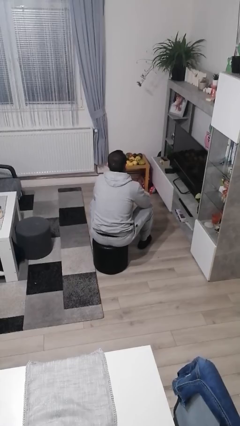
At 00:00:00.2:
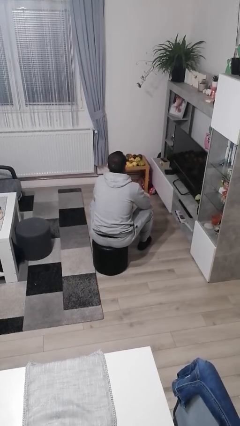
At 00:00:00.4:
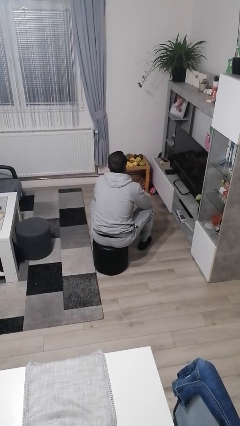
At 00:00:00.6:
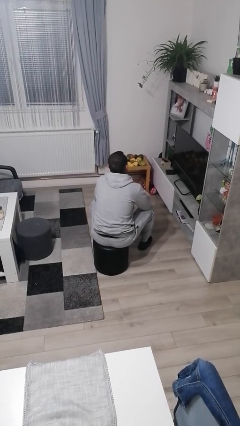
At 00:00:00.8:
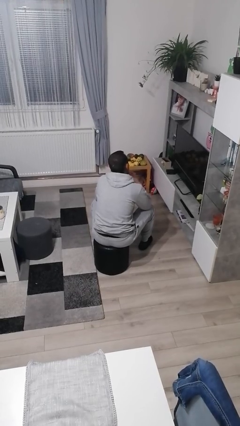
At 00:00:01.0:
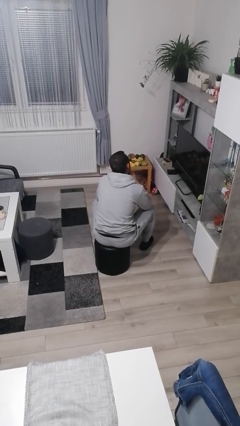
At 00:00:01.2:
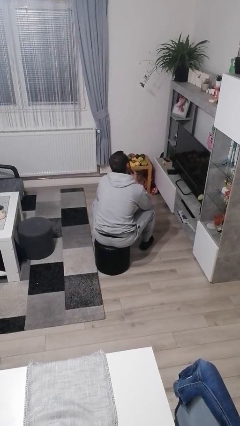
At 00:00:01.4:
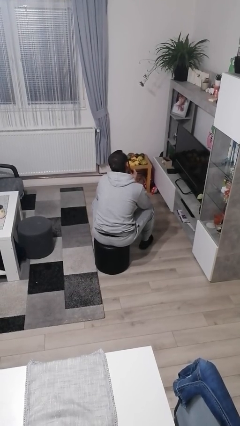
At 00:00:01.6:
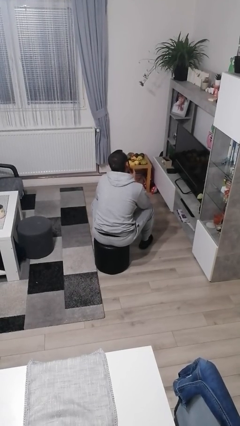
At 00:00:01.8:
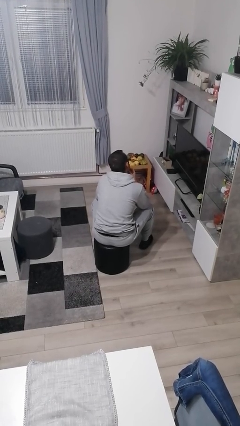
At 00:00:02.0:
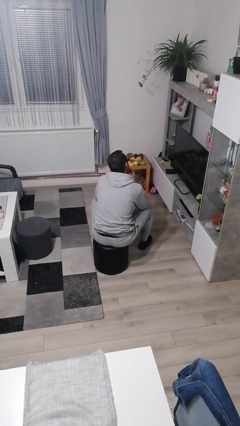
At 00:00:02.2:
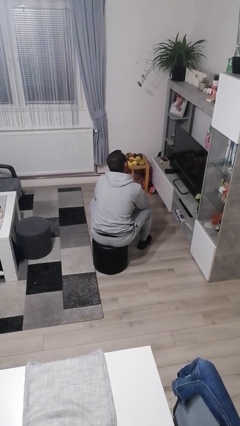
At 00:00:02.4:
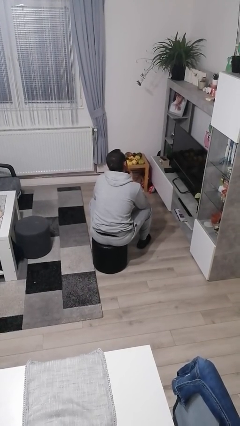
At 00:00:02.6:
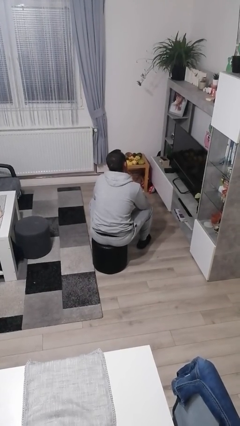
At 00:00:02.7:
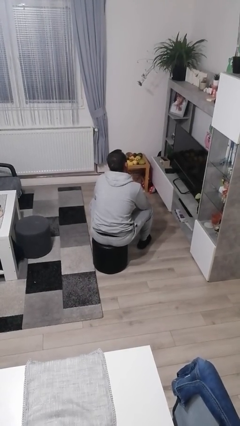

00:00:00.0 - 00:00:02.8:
person strokes chin

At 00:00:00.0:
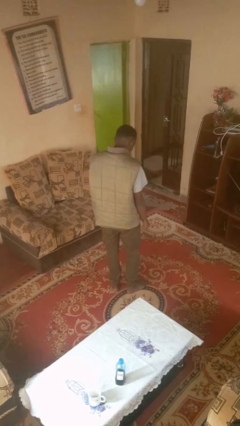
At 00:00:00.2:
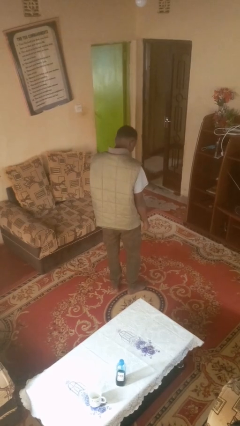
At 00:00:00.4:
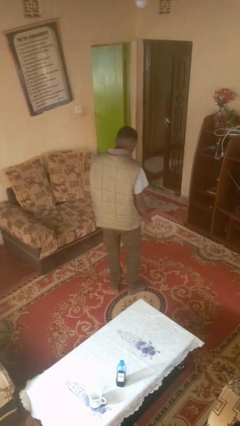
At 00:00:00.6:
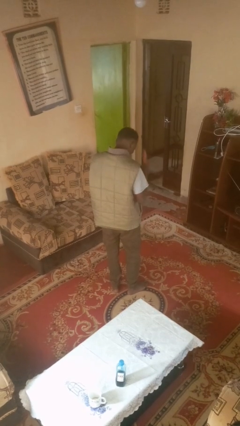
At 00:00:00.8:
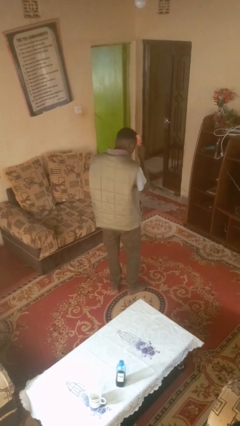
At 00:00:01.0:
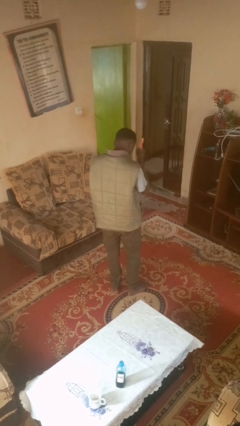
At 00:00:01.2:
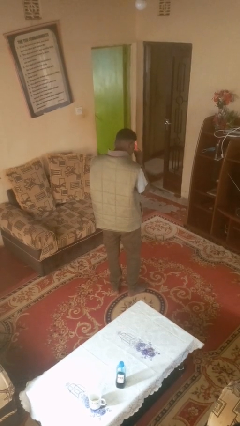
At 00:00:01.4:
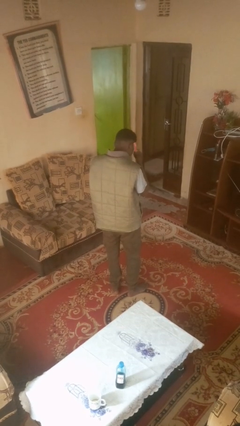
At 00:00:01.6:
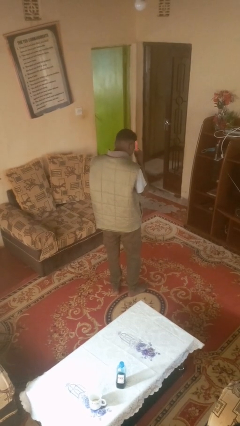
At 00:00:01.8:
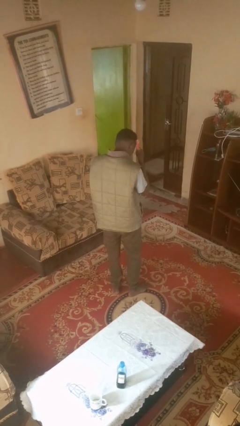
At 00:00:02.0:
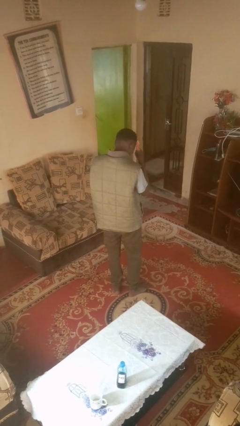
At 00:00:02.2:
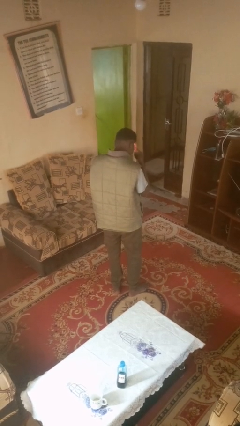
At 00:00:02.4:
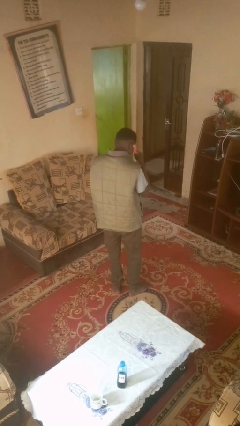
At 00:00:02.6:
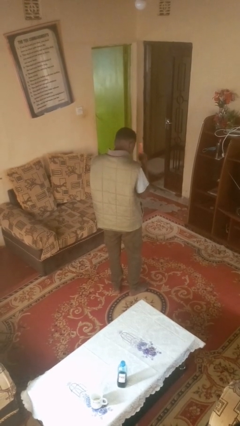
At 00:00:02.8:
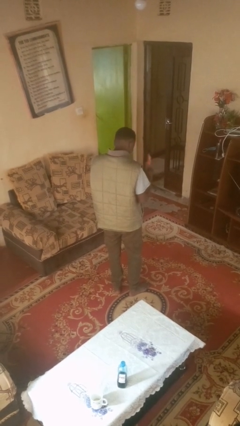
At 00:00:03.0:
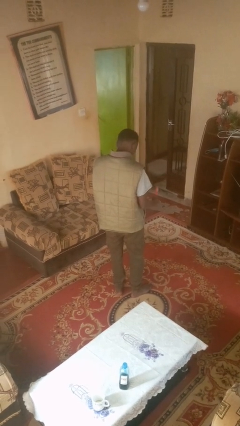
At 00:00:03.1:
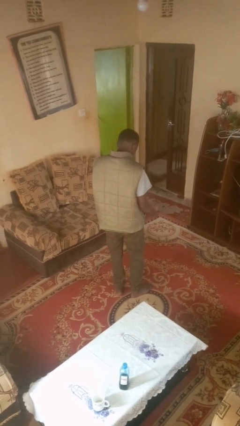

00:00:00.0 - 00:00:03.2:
person brushes hair

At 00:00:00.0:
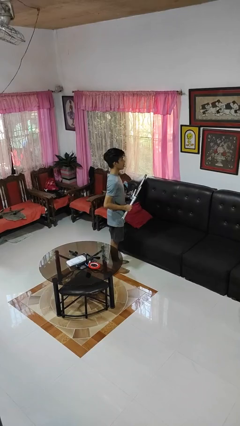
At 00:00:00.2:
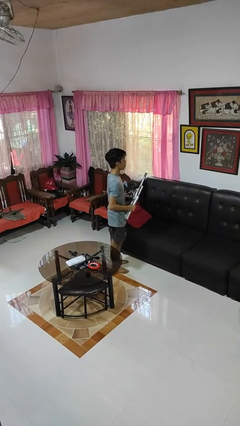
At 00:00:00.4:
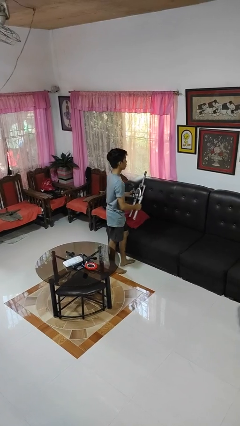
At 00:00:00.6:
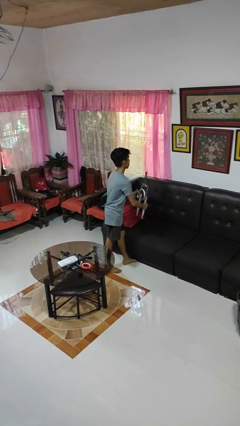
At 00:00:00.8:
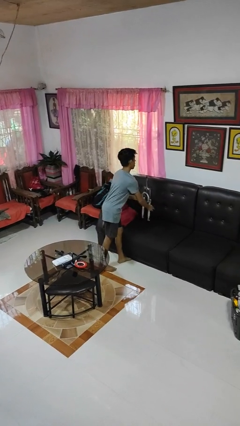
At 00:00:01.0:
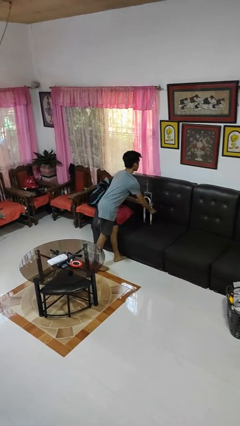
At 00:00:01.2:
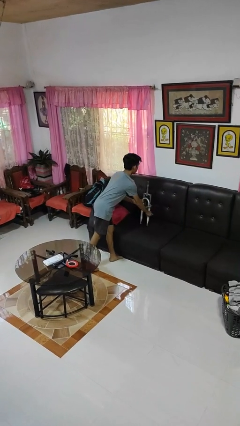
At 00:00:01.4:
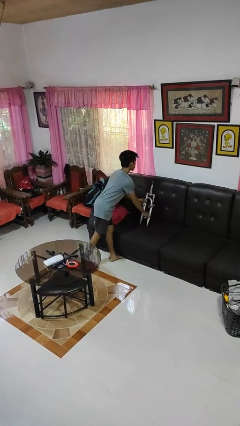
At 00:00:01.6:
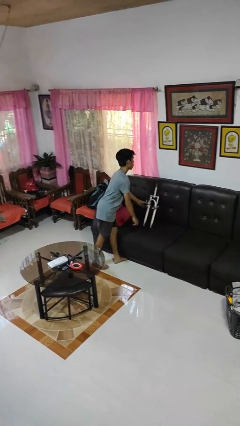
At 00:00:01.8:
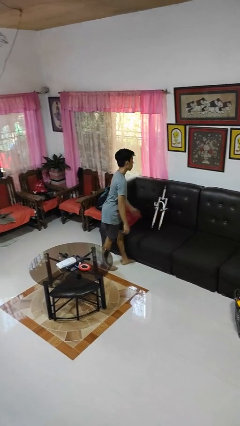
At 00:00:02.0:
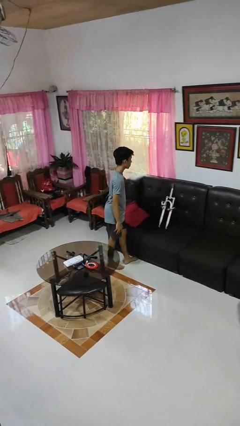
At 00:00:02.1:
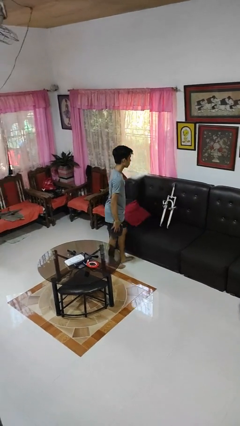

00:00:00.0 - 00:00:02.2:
person puts down object on couch

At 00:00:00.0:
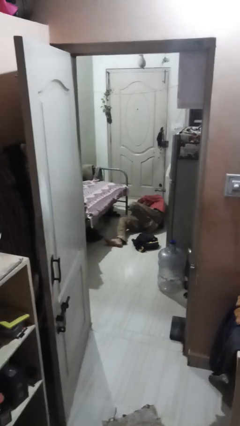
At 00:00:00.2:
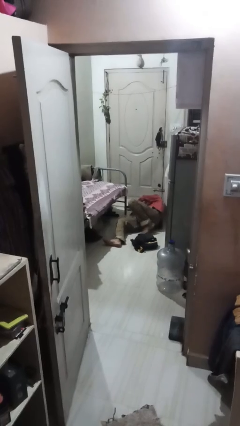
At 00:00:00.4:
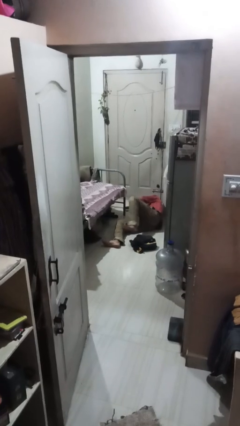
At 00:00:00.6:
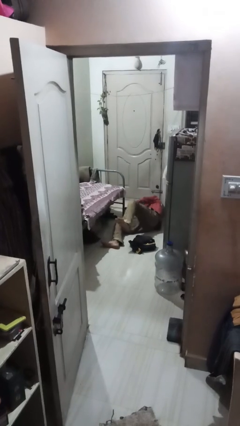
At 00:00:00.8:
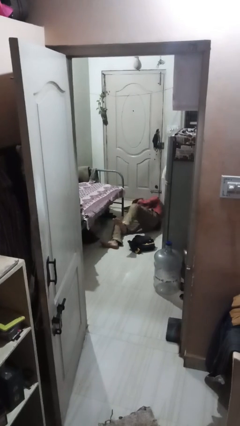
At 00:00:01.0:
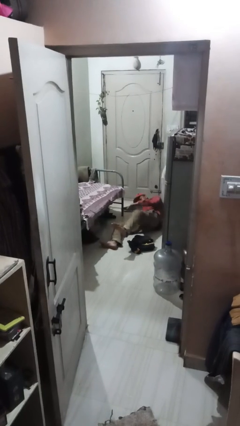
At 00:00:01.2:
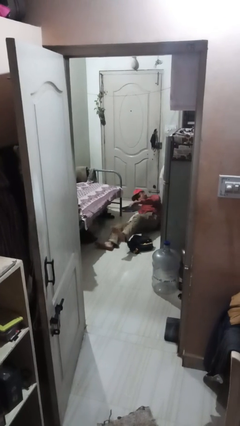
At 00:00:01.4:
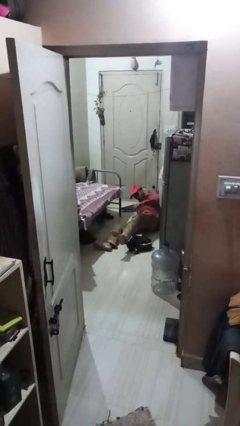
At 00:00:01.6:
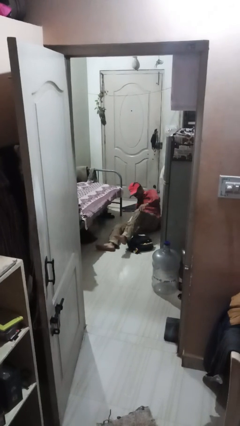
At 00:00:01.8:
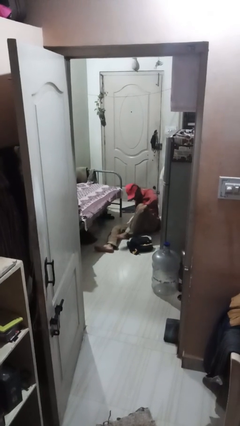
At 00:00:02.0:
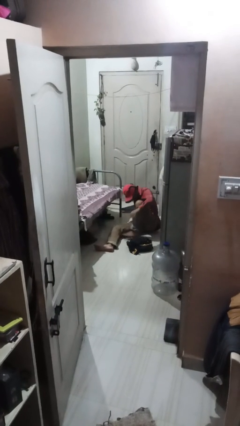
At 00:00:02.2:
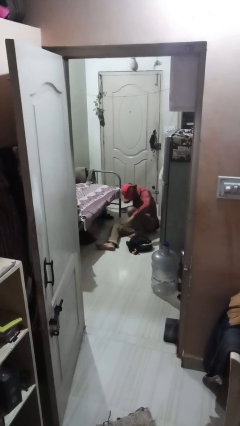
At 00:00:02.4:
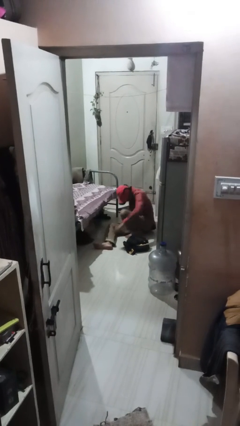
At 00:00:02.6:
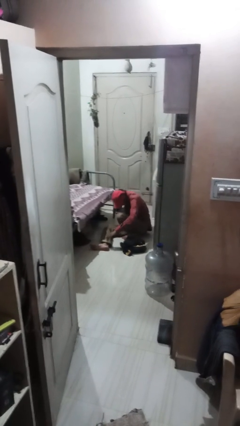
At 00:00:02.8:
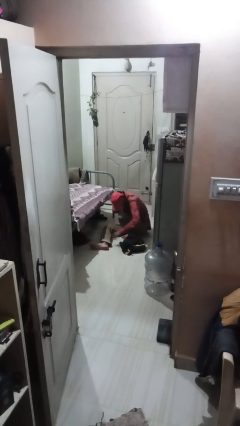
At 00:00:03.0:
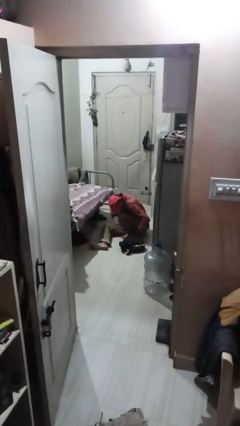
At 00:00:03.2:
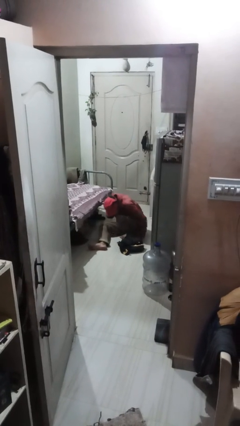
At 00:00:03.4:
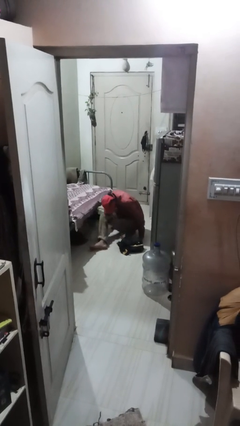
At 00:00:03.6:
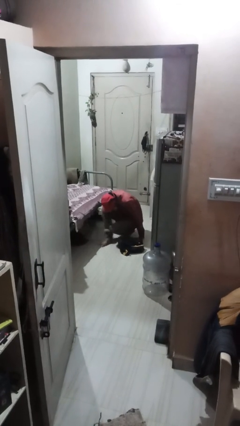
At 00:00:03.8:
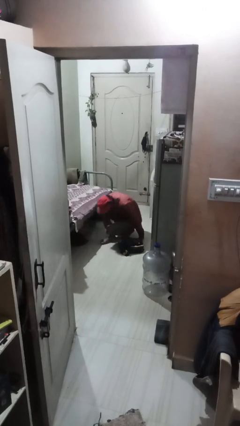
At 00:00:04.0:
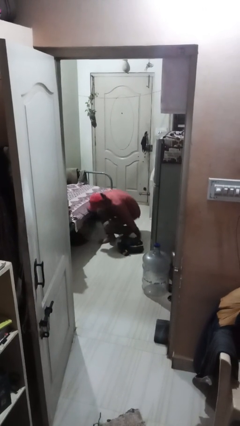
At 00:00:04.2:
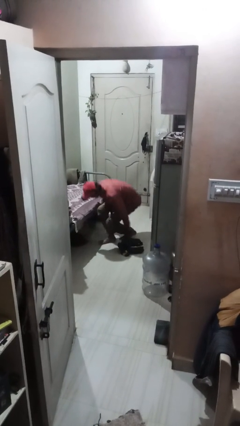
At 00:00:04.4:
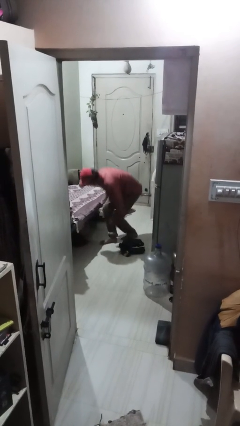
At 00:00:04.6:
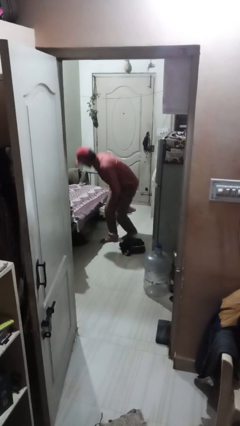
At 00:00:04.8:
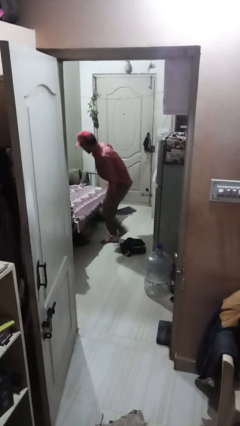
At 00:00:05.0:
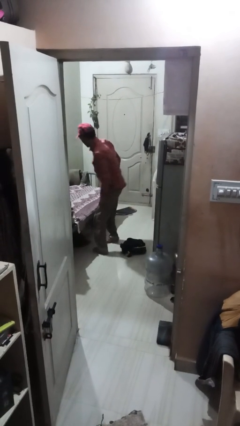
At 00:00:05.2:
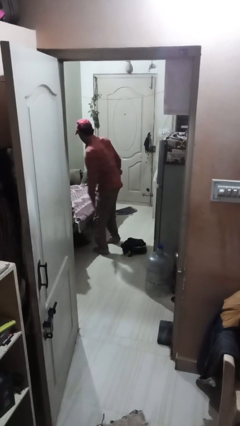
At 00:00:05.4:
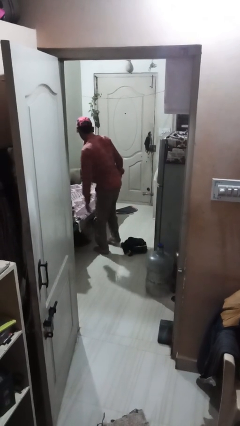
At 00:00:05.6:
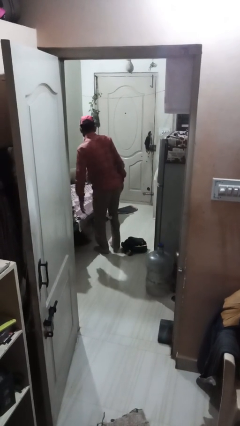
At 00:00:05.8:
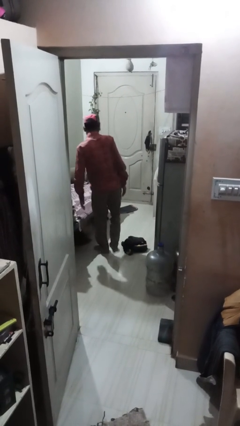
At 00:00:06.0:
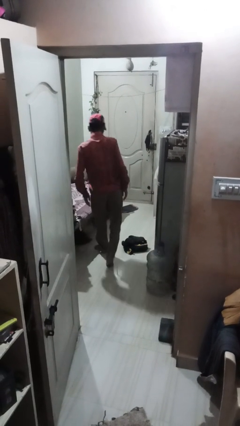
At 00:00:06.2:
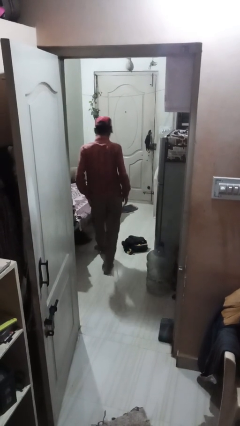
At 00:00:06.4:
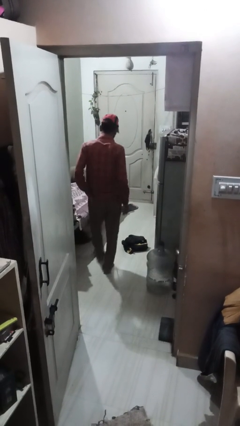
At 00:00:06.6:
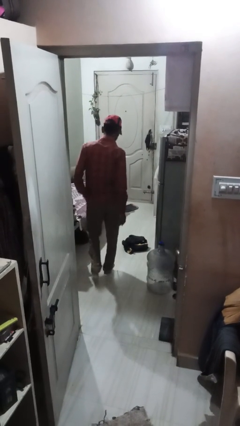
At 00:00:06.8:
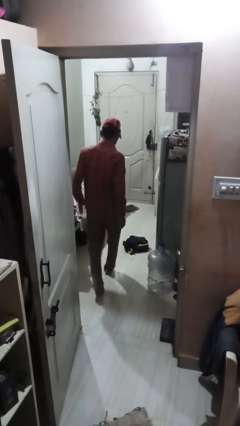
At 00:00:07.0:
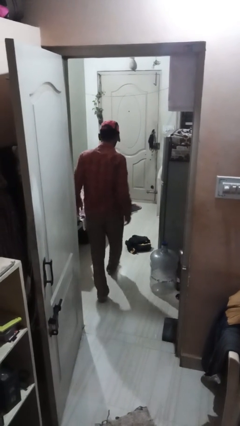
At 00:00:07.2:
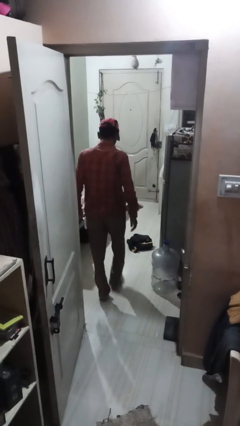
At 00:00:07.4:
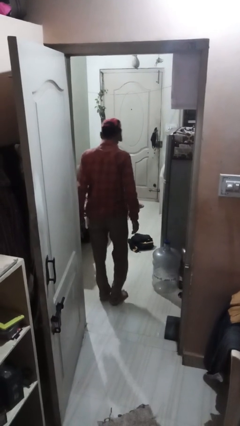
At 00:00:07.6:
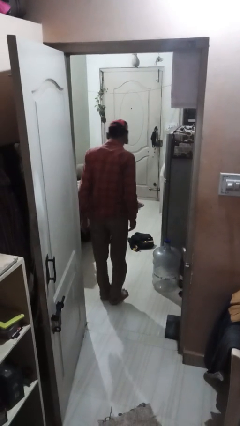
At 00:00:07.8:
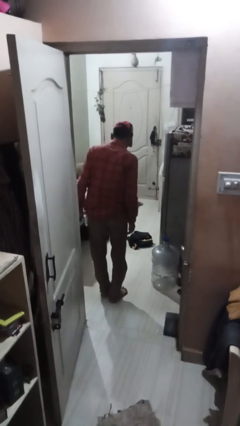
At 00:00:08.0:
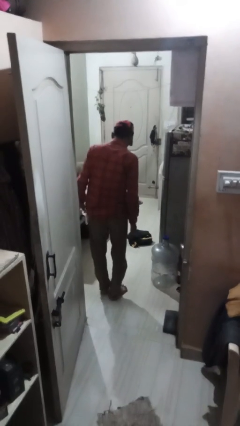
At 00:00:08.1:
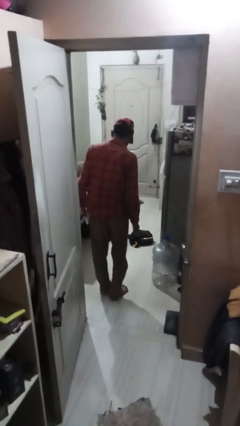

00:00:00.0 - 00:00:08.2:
person stands up from floor

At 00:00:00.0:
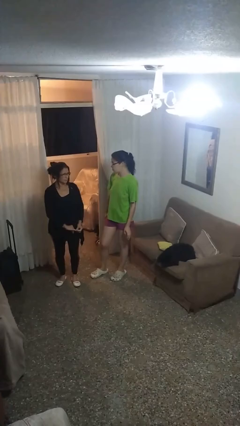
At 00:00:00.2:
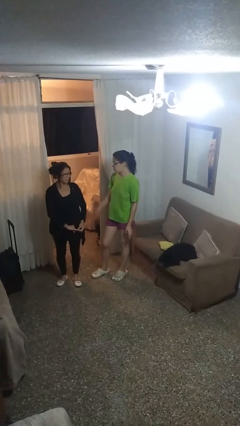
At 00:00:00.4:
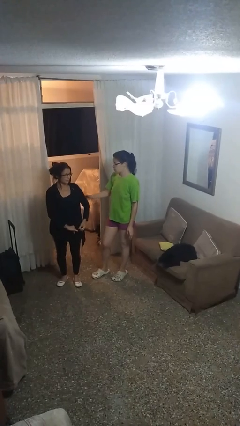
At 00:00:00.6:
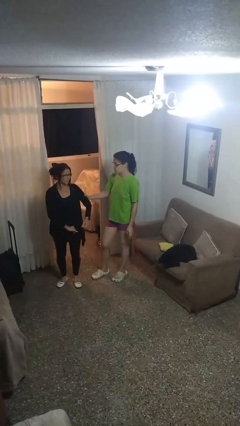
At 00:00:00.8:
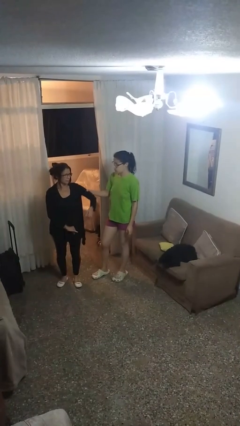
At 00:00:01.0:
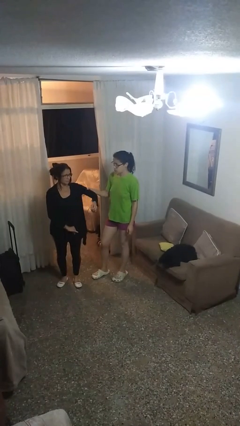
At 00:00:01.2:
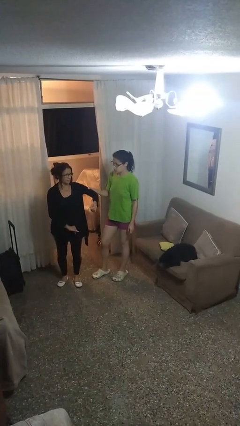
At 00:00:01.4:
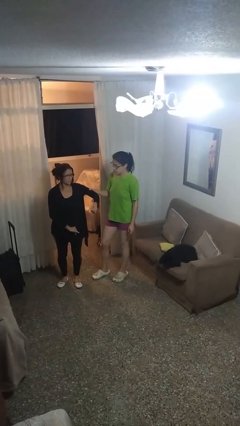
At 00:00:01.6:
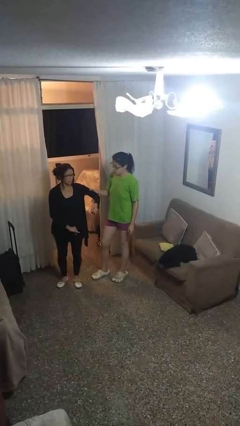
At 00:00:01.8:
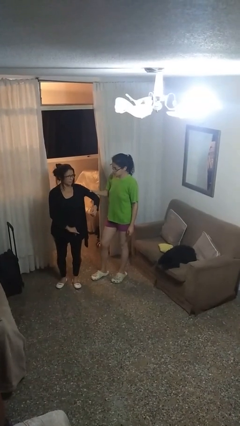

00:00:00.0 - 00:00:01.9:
person grabs person by bicep
